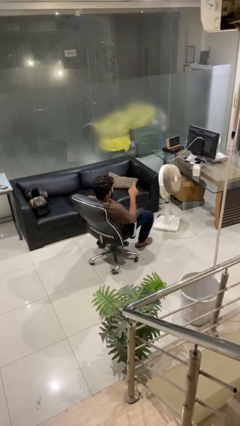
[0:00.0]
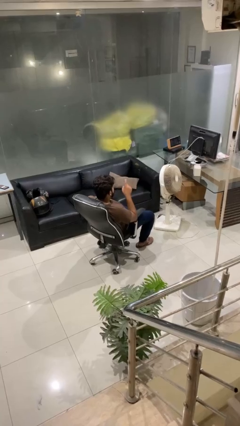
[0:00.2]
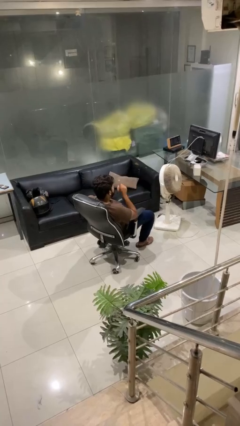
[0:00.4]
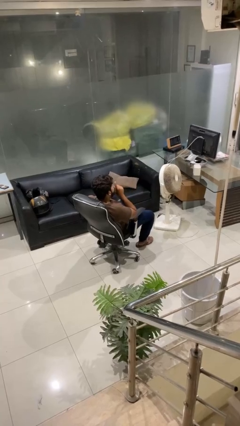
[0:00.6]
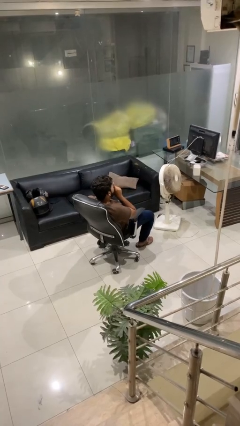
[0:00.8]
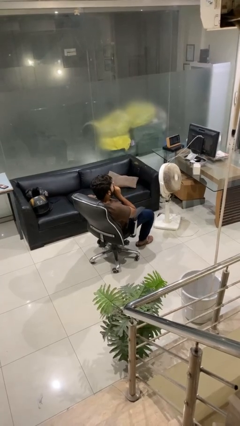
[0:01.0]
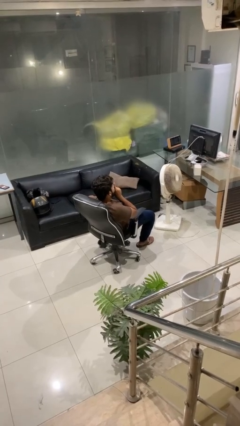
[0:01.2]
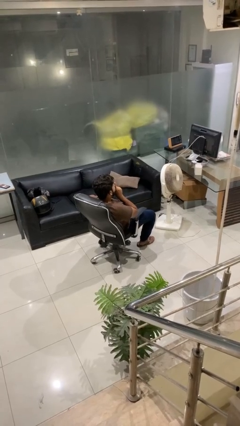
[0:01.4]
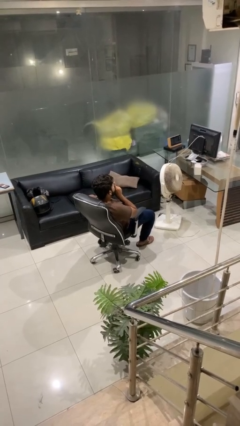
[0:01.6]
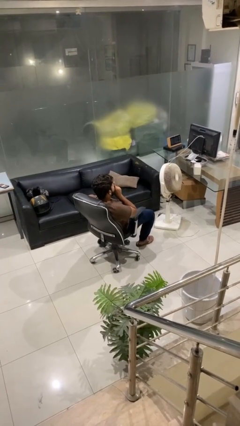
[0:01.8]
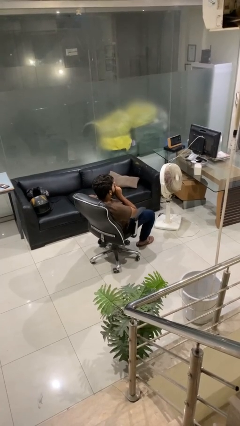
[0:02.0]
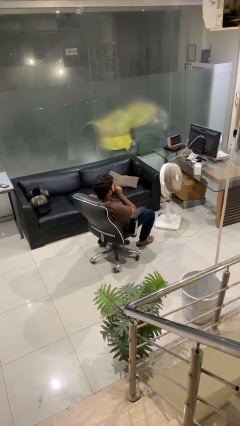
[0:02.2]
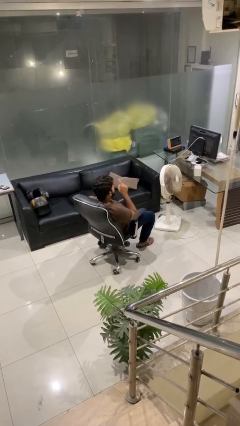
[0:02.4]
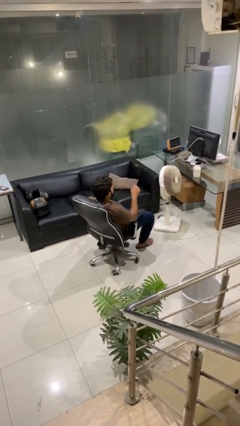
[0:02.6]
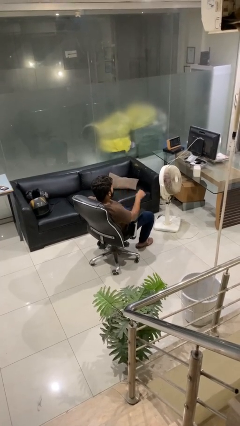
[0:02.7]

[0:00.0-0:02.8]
person gestures be quiet

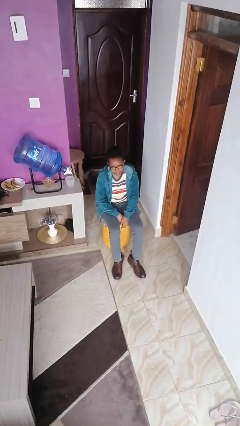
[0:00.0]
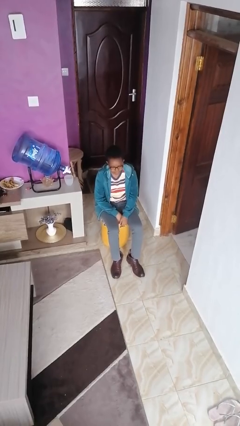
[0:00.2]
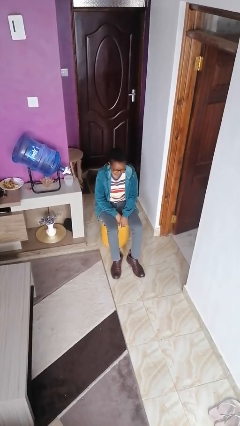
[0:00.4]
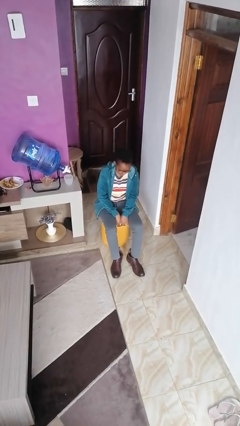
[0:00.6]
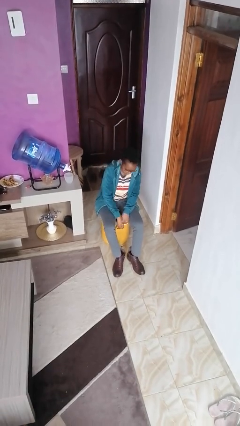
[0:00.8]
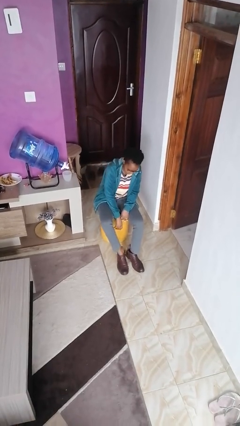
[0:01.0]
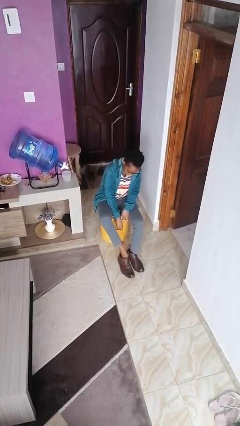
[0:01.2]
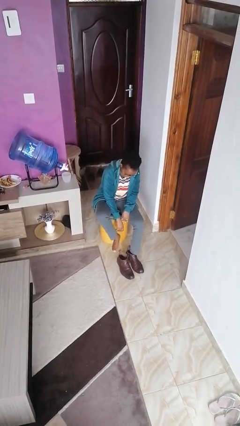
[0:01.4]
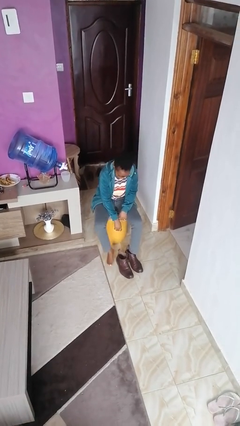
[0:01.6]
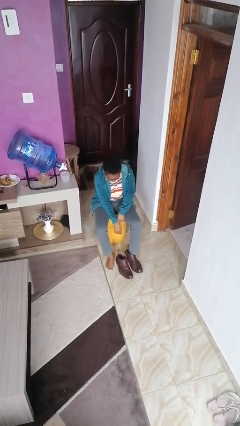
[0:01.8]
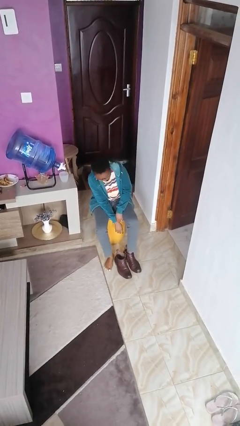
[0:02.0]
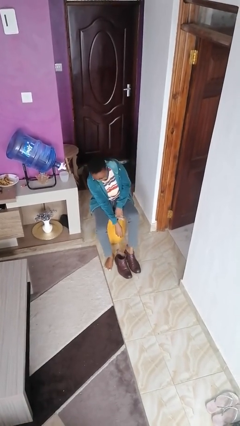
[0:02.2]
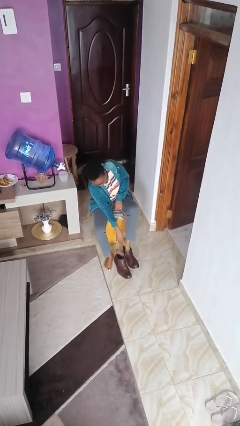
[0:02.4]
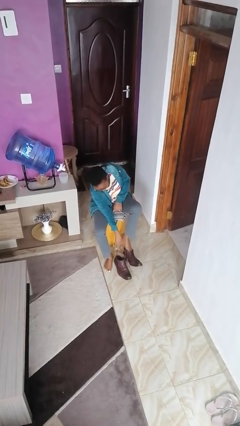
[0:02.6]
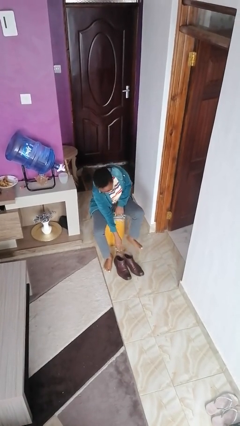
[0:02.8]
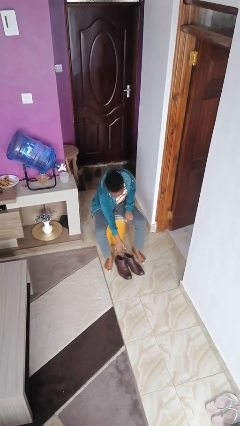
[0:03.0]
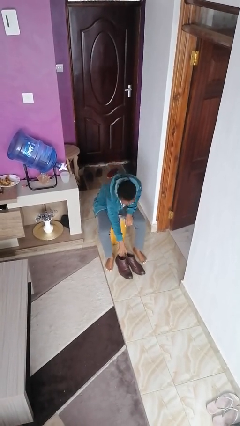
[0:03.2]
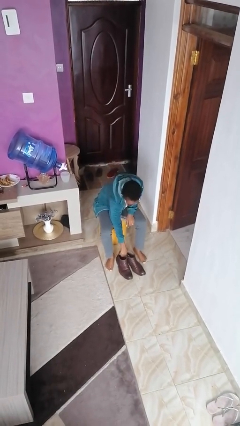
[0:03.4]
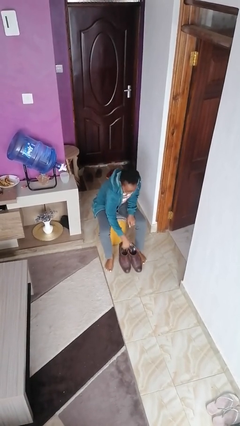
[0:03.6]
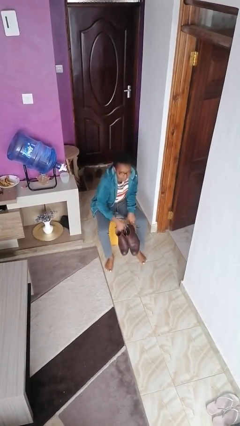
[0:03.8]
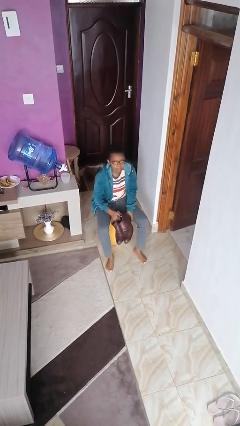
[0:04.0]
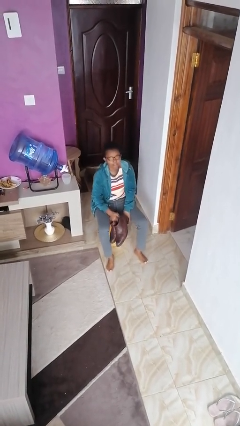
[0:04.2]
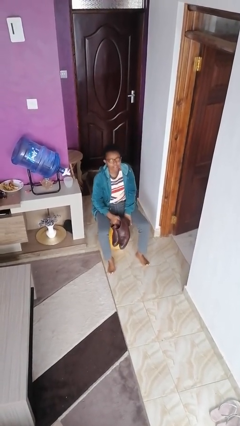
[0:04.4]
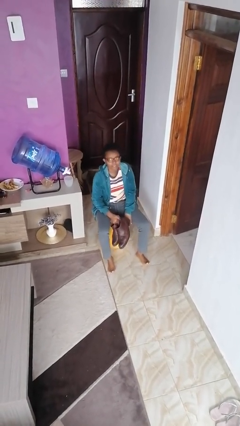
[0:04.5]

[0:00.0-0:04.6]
person takes off boots

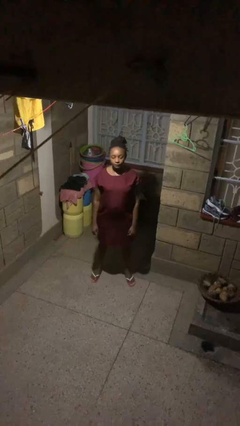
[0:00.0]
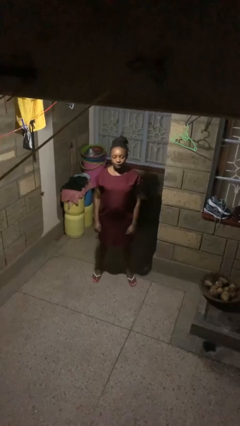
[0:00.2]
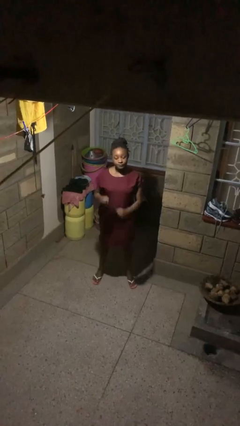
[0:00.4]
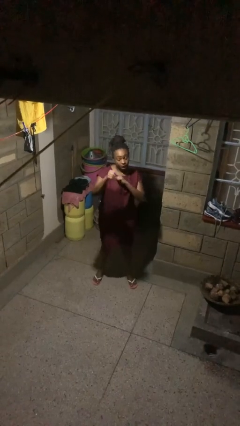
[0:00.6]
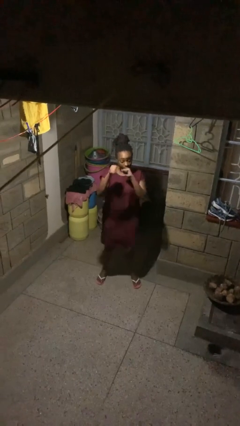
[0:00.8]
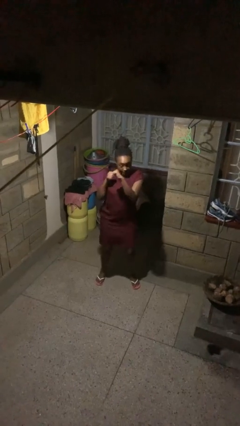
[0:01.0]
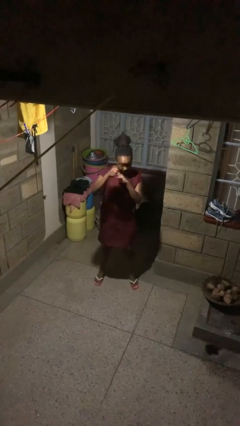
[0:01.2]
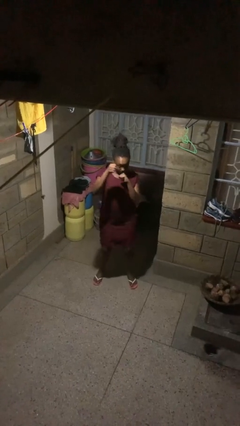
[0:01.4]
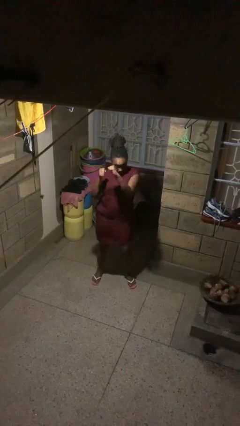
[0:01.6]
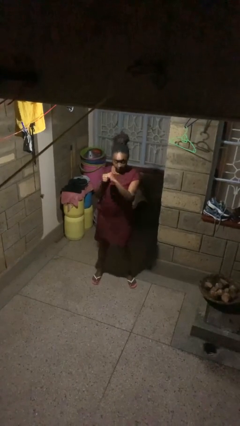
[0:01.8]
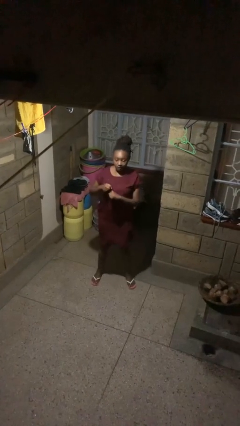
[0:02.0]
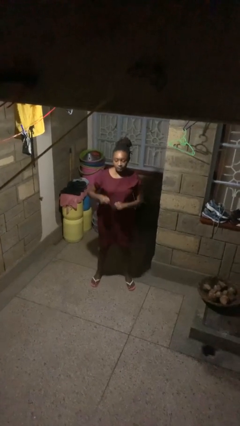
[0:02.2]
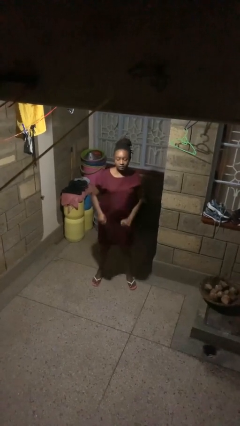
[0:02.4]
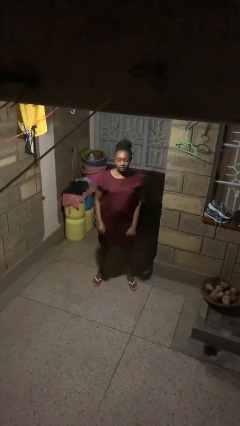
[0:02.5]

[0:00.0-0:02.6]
person punches

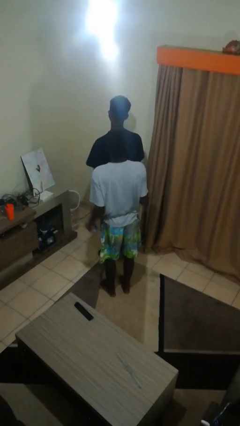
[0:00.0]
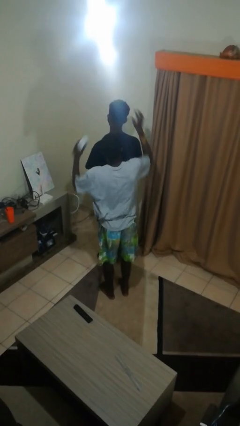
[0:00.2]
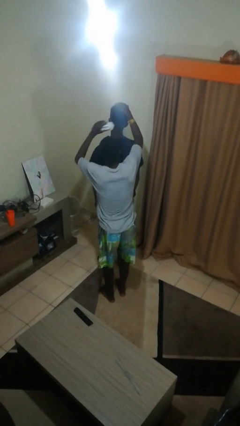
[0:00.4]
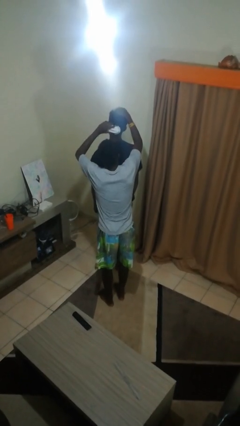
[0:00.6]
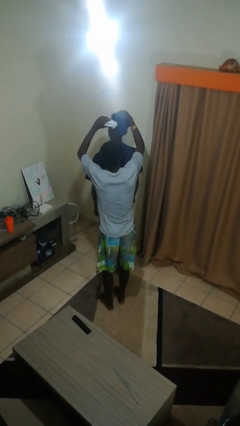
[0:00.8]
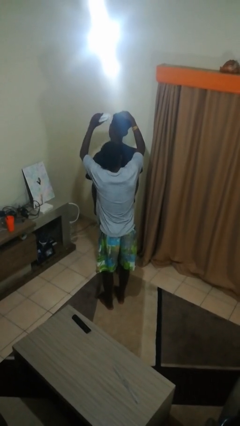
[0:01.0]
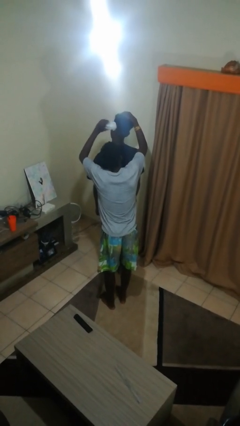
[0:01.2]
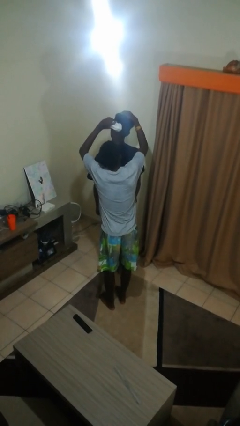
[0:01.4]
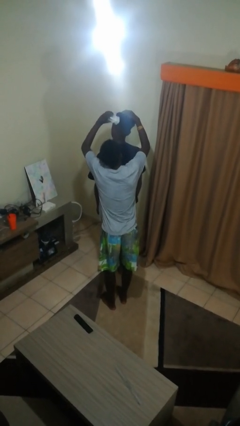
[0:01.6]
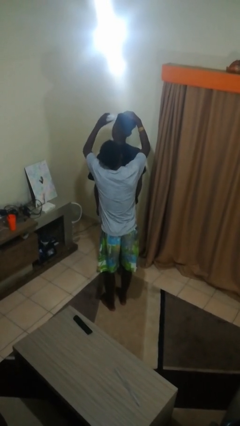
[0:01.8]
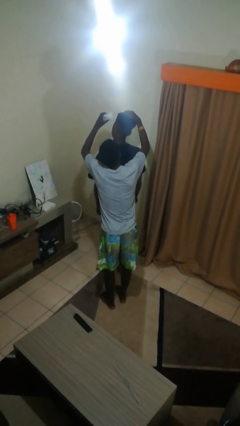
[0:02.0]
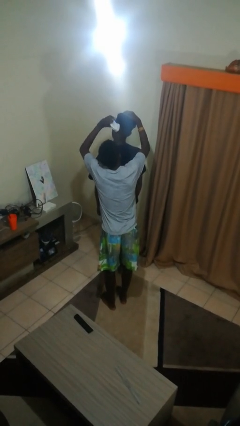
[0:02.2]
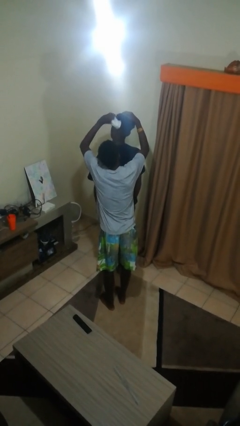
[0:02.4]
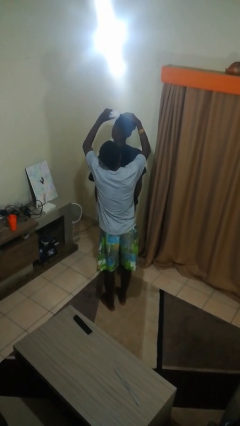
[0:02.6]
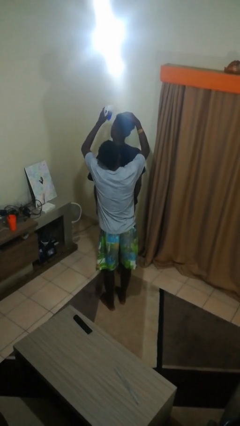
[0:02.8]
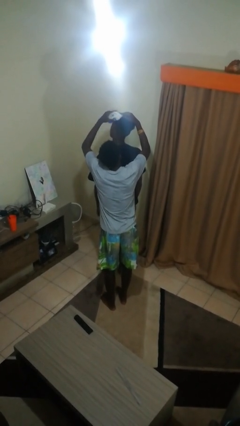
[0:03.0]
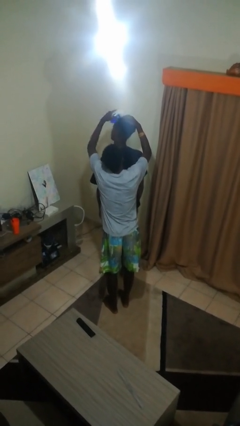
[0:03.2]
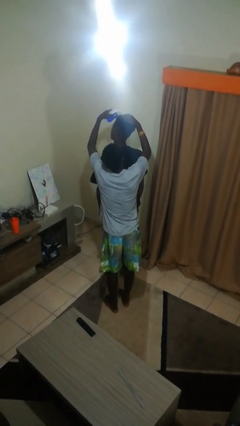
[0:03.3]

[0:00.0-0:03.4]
person brushes hair of person

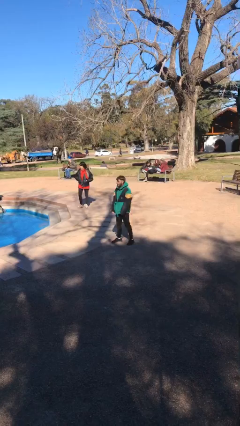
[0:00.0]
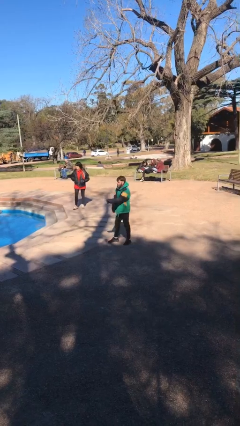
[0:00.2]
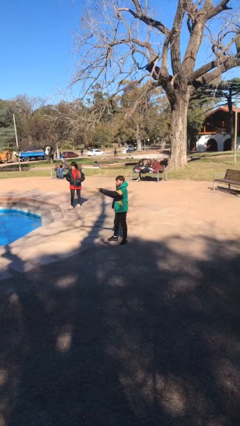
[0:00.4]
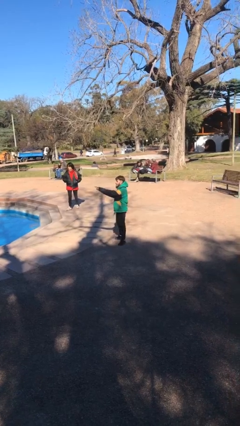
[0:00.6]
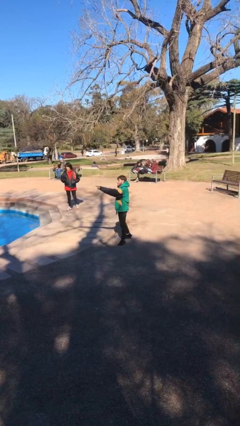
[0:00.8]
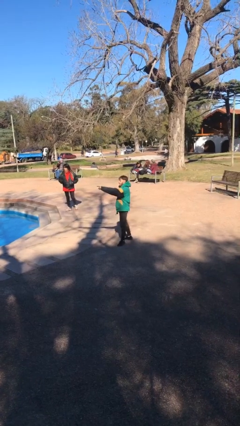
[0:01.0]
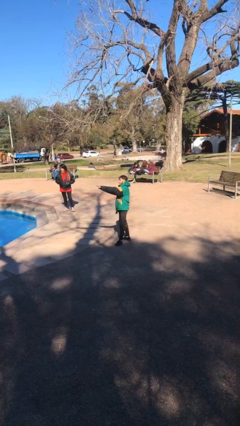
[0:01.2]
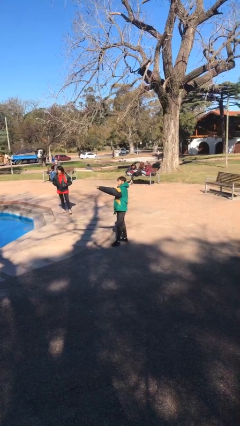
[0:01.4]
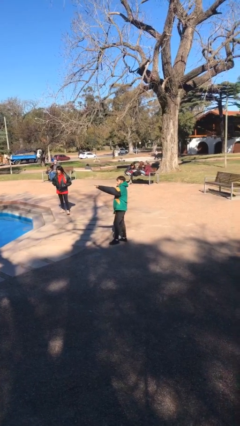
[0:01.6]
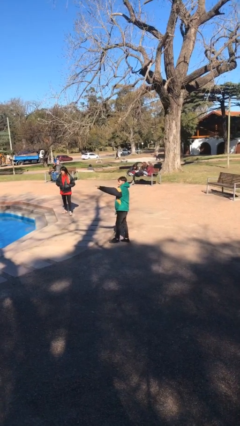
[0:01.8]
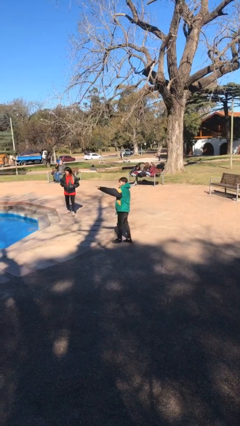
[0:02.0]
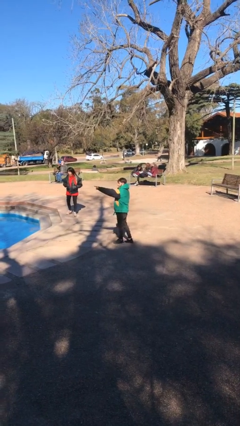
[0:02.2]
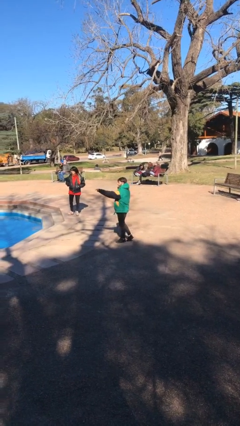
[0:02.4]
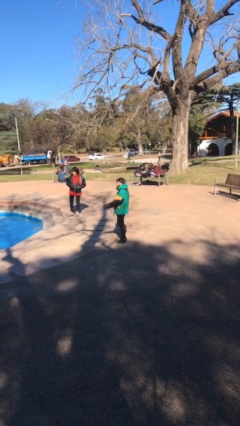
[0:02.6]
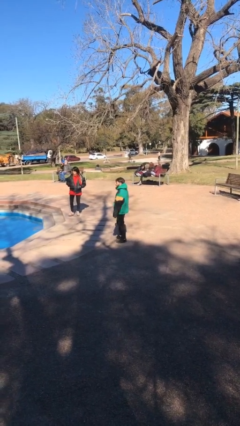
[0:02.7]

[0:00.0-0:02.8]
person points at person

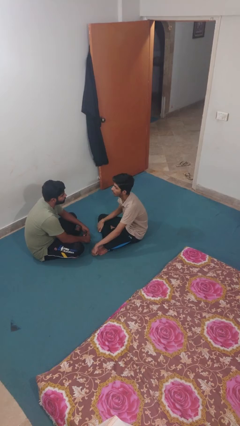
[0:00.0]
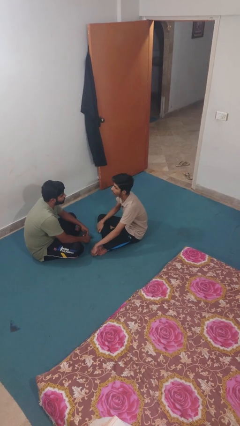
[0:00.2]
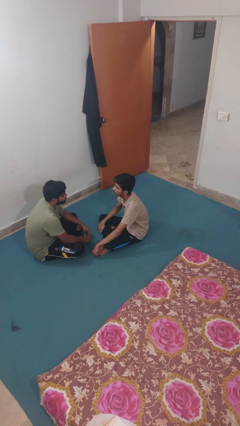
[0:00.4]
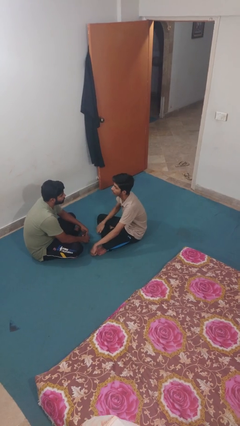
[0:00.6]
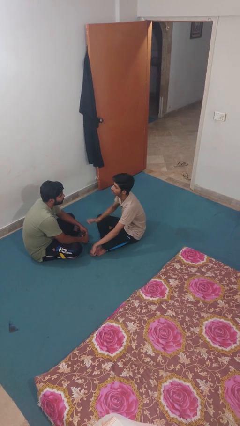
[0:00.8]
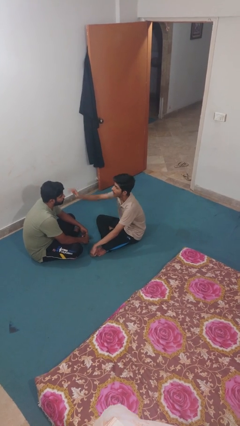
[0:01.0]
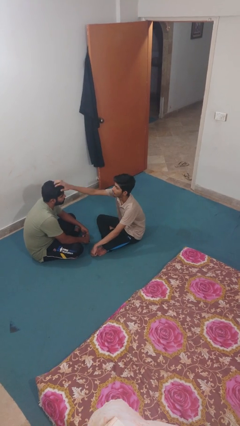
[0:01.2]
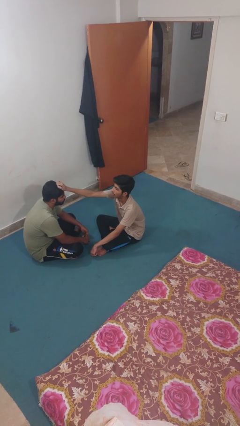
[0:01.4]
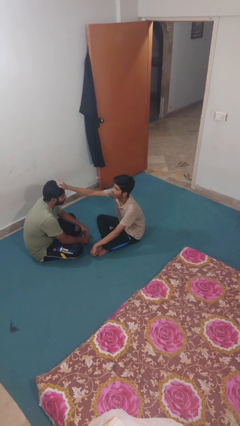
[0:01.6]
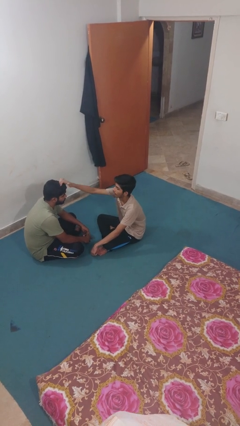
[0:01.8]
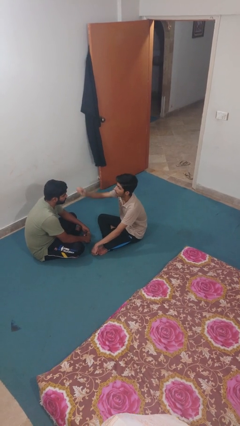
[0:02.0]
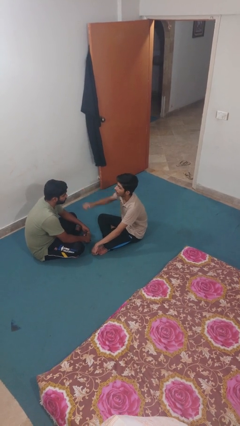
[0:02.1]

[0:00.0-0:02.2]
person grabs person by hair
